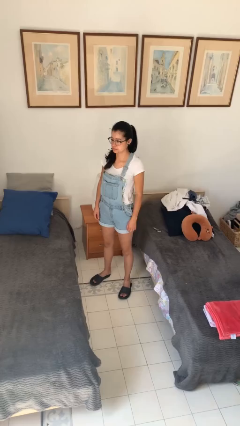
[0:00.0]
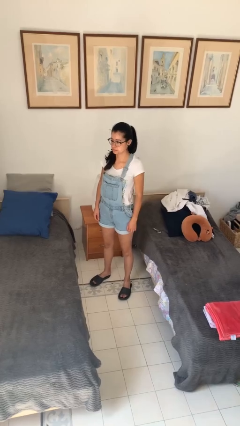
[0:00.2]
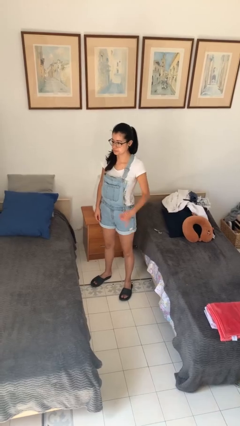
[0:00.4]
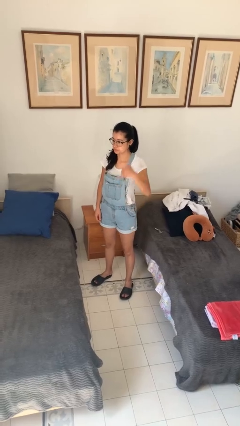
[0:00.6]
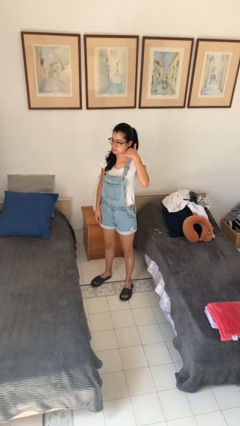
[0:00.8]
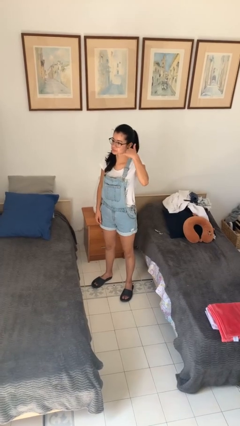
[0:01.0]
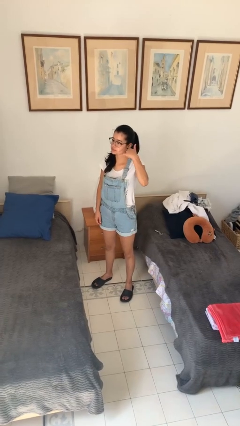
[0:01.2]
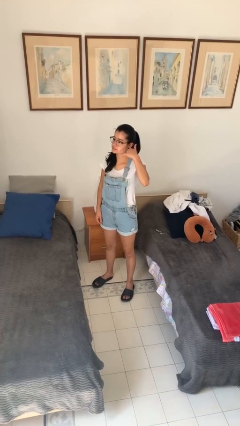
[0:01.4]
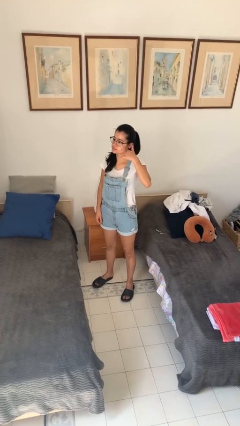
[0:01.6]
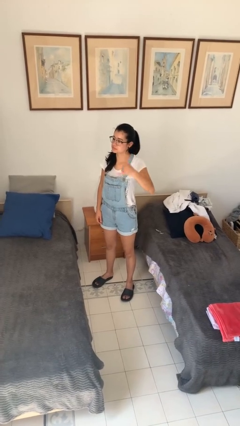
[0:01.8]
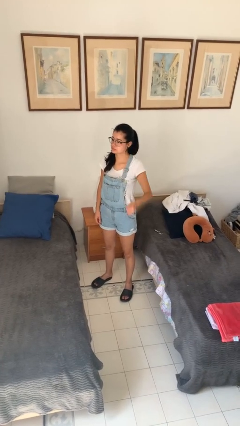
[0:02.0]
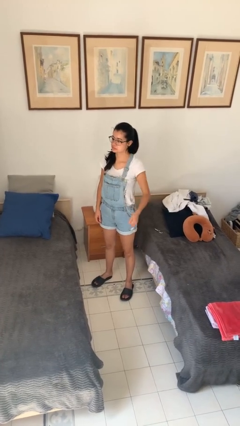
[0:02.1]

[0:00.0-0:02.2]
person gestures call me

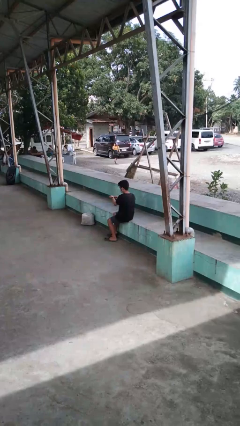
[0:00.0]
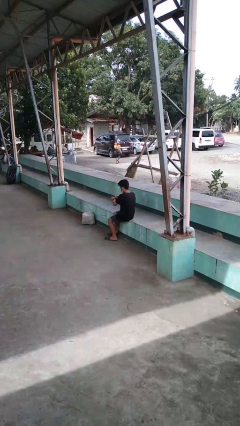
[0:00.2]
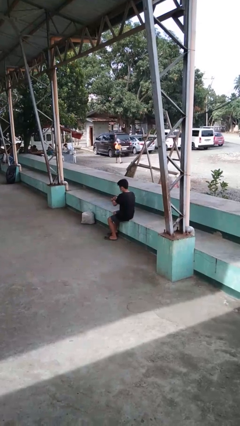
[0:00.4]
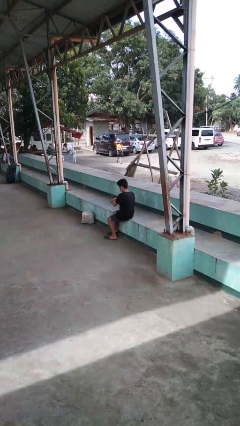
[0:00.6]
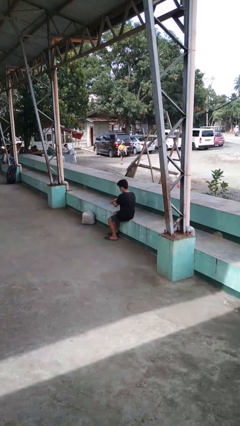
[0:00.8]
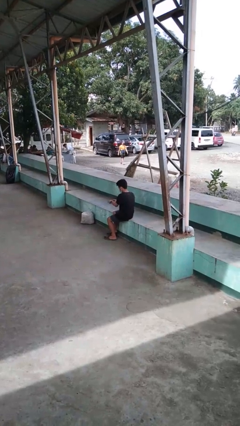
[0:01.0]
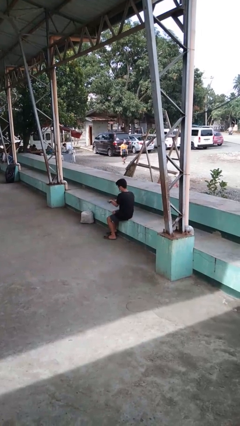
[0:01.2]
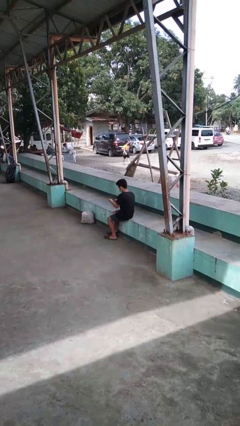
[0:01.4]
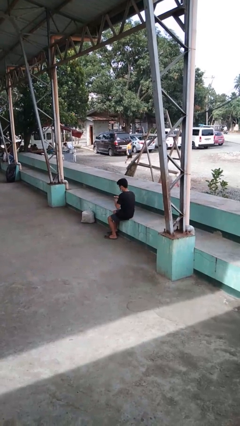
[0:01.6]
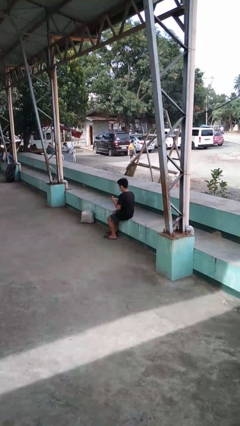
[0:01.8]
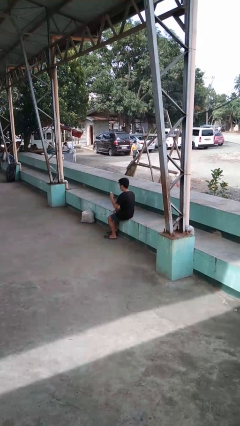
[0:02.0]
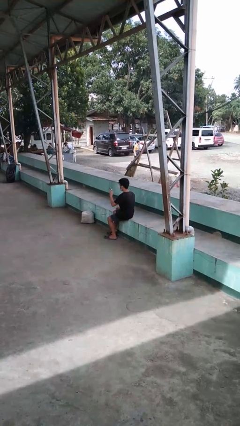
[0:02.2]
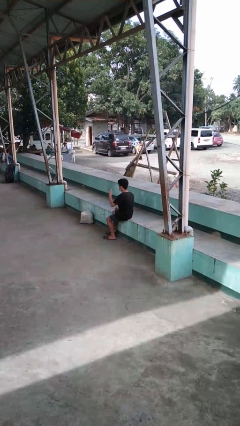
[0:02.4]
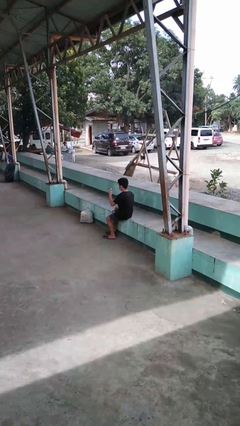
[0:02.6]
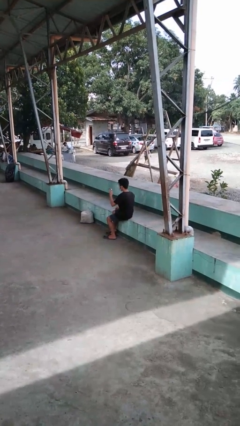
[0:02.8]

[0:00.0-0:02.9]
person takes off wristwatch

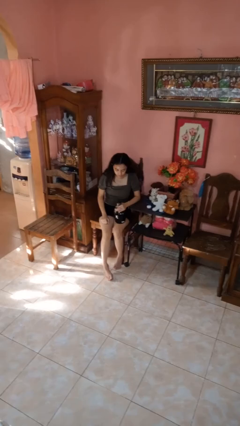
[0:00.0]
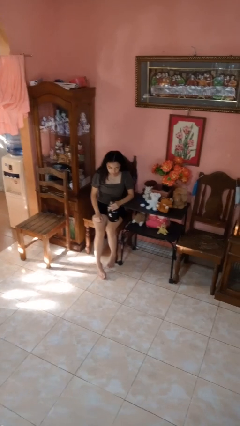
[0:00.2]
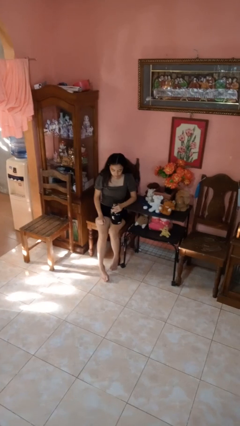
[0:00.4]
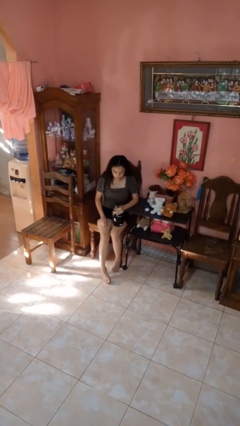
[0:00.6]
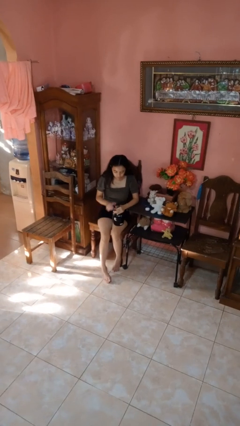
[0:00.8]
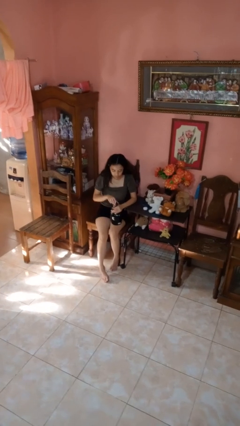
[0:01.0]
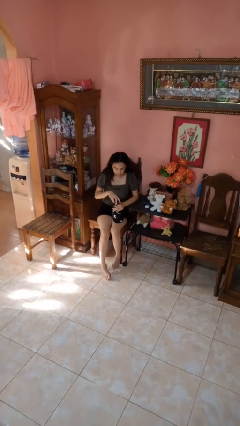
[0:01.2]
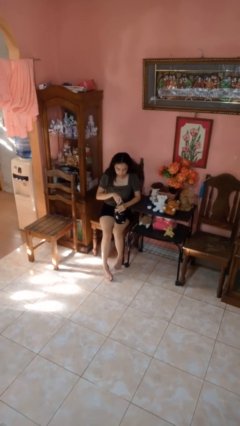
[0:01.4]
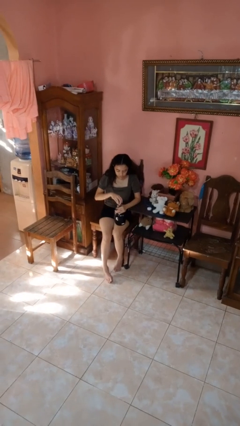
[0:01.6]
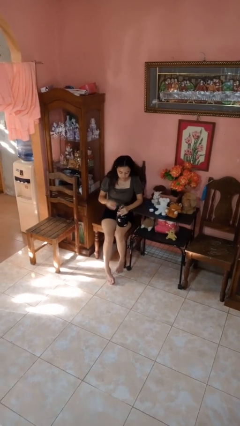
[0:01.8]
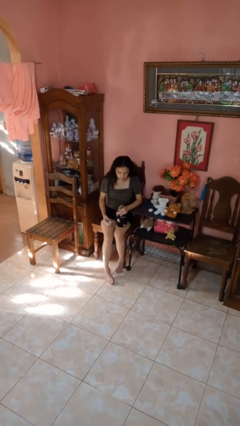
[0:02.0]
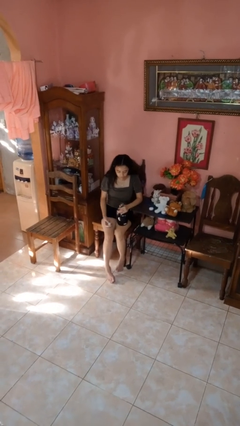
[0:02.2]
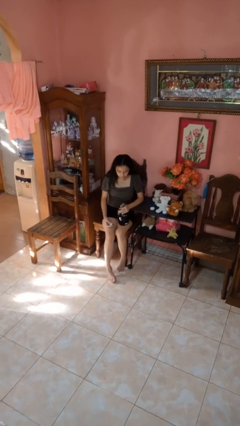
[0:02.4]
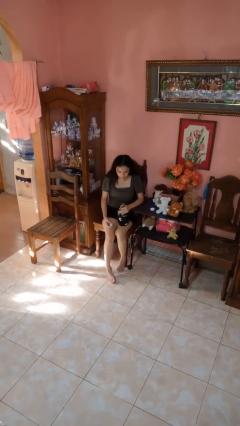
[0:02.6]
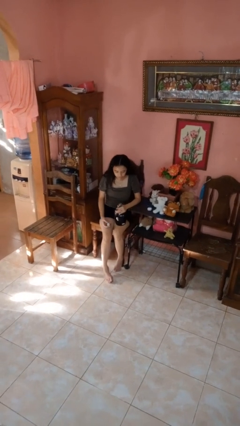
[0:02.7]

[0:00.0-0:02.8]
person unscrews lid from bottle

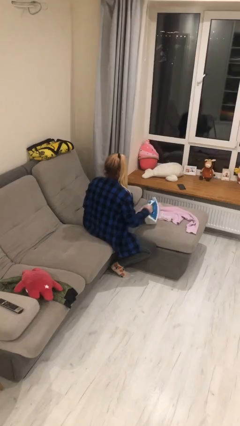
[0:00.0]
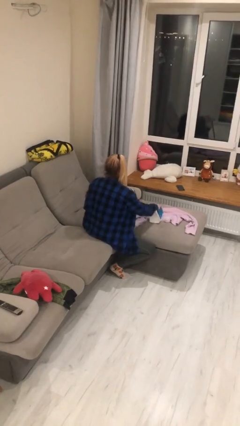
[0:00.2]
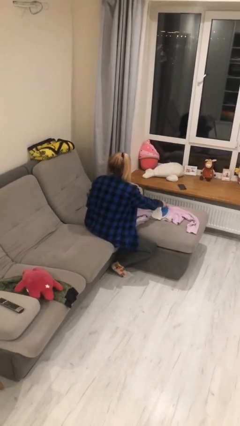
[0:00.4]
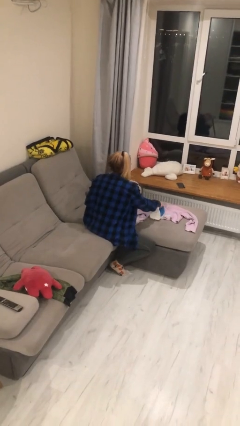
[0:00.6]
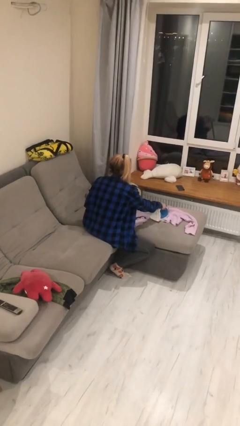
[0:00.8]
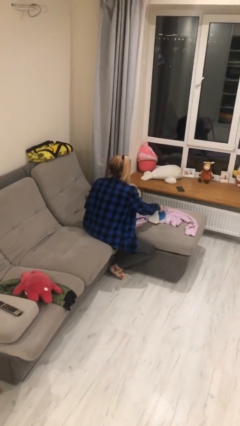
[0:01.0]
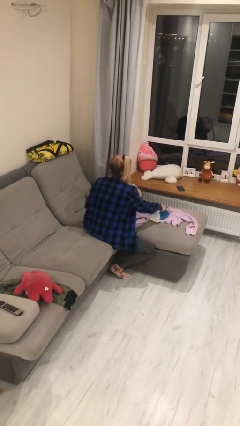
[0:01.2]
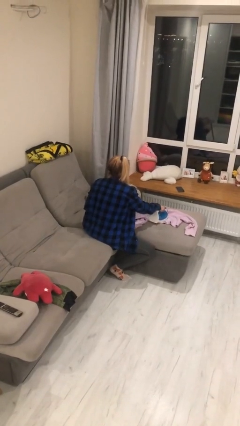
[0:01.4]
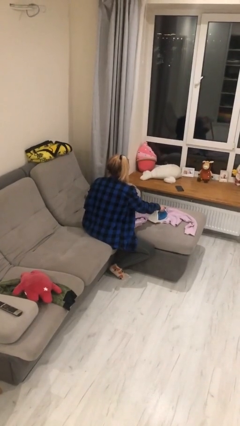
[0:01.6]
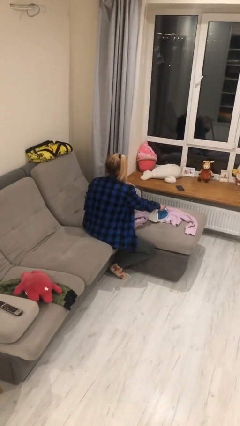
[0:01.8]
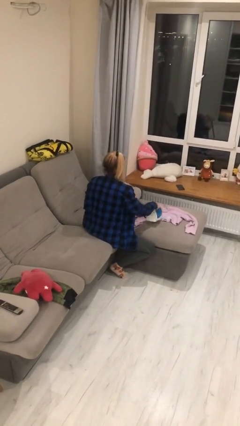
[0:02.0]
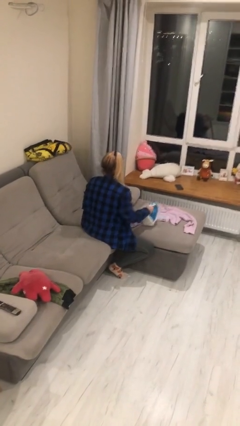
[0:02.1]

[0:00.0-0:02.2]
person irons clothes

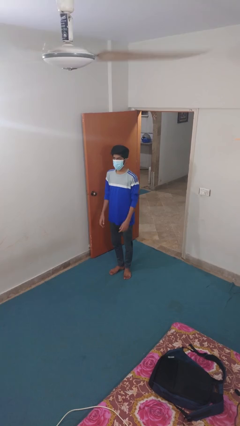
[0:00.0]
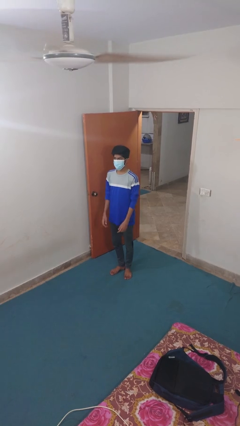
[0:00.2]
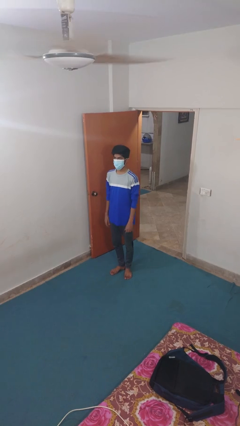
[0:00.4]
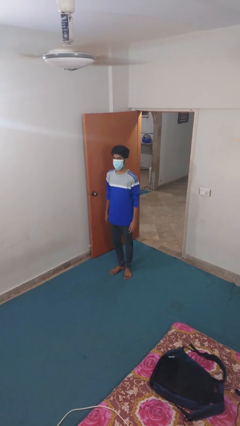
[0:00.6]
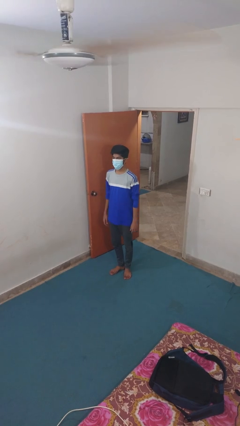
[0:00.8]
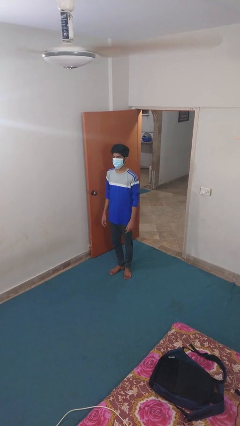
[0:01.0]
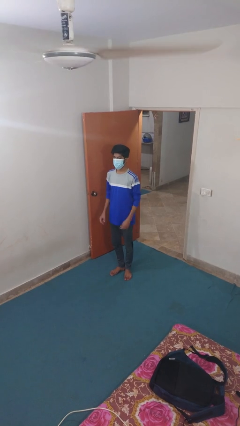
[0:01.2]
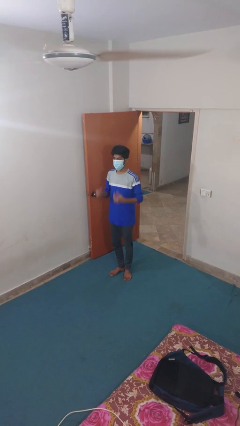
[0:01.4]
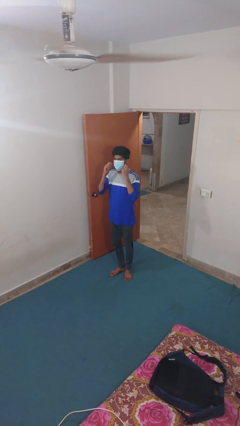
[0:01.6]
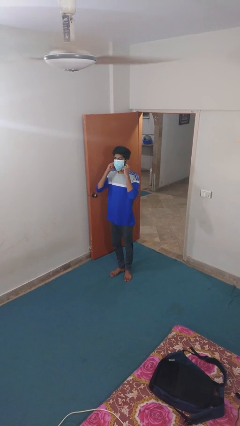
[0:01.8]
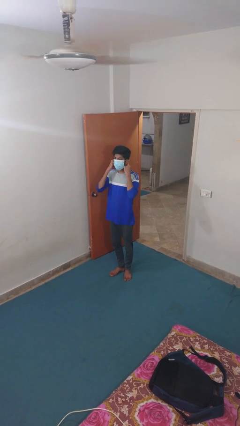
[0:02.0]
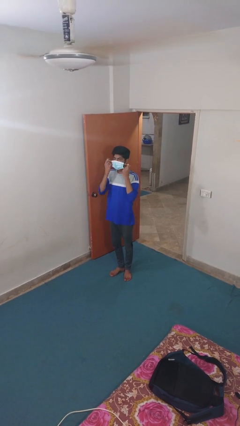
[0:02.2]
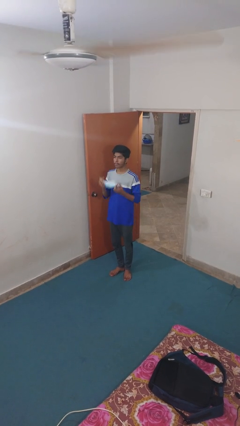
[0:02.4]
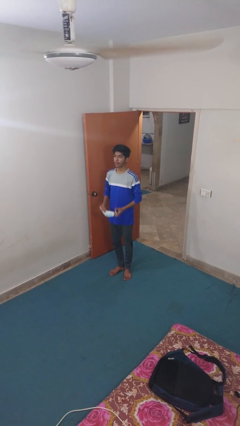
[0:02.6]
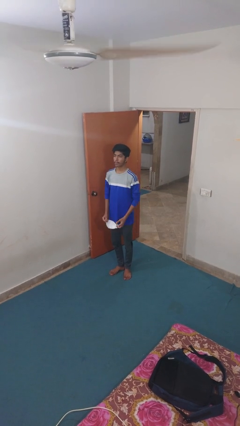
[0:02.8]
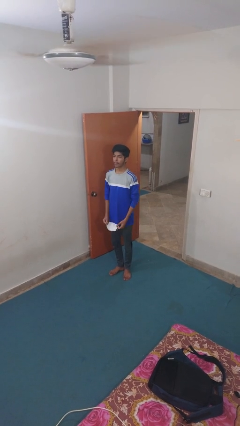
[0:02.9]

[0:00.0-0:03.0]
person takes off facemask

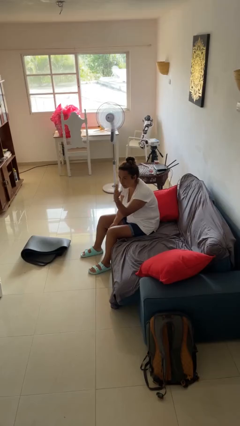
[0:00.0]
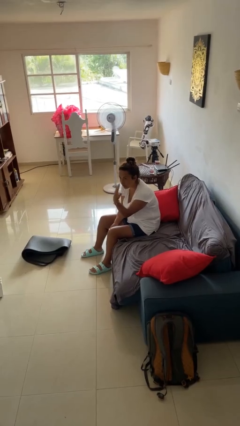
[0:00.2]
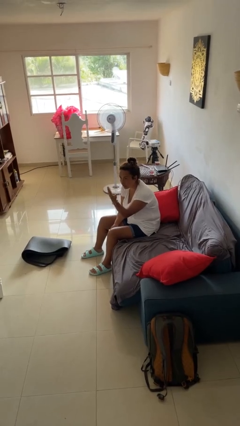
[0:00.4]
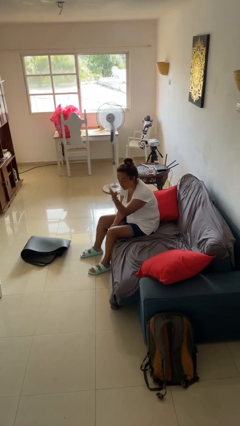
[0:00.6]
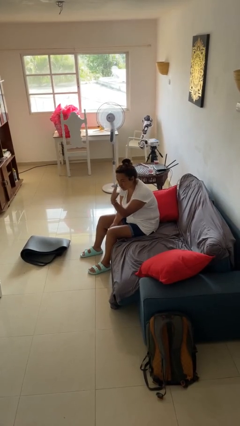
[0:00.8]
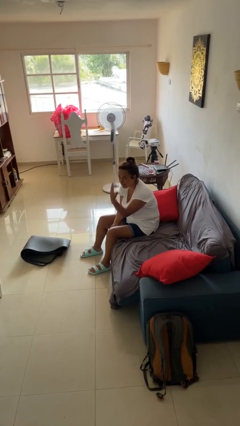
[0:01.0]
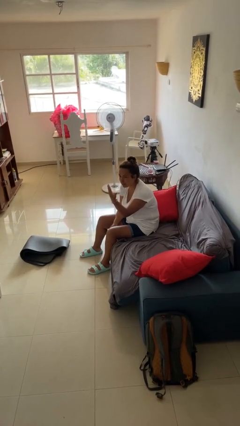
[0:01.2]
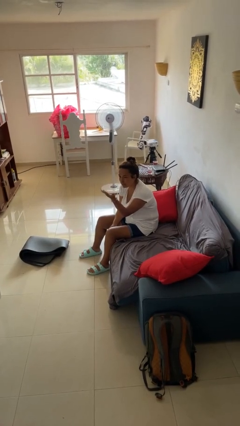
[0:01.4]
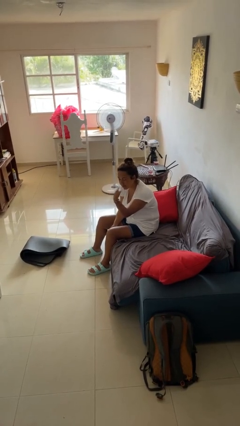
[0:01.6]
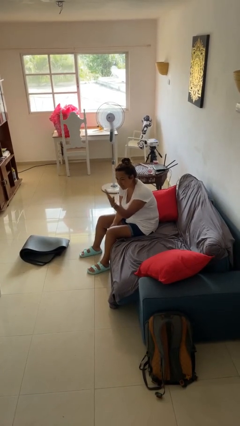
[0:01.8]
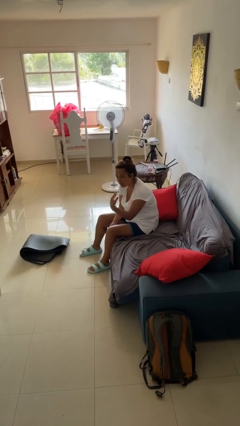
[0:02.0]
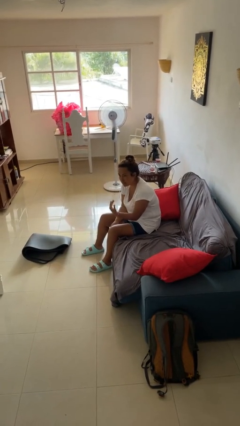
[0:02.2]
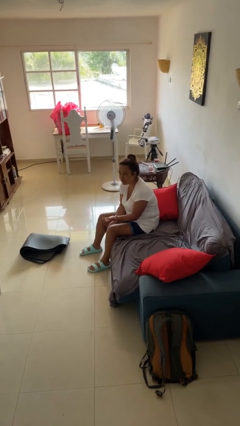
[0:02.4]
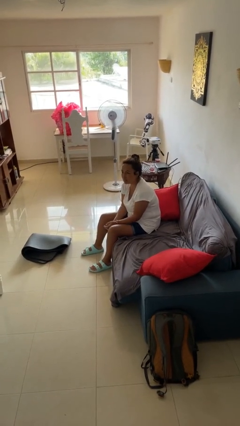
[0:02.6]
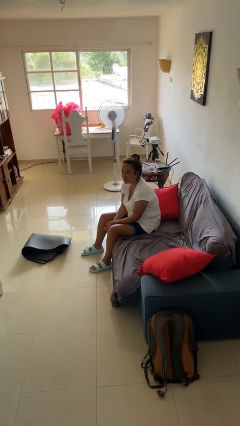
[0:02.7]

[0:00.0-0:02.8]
person gestures come here

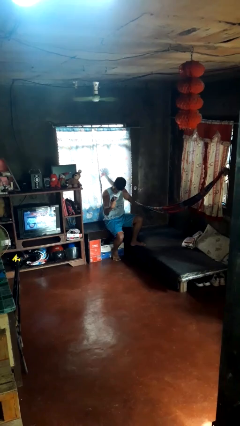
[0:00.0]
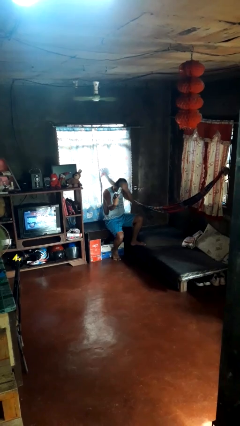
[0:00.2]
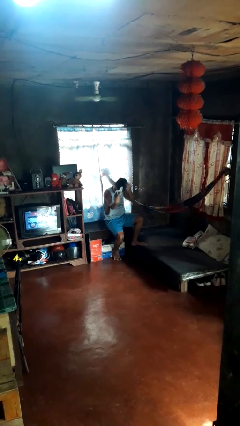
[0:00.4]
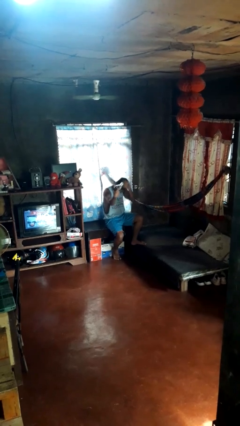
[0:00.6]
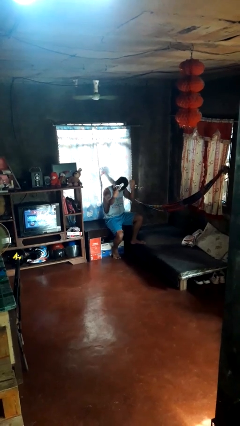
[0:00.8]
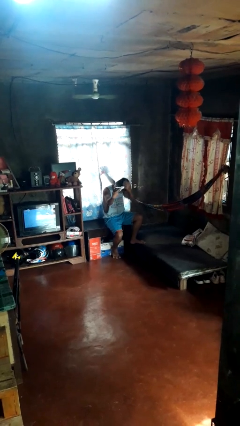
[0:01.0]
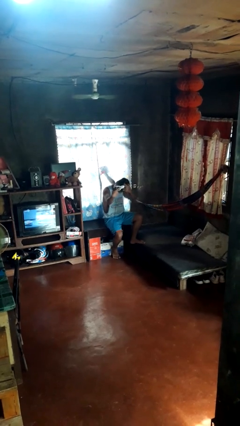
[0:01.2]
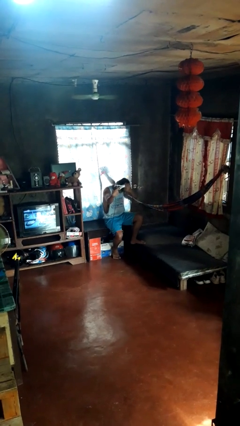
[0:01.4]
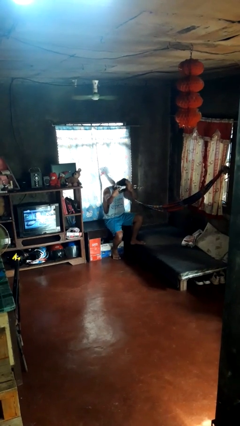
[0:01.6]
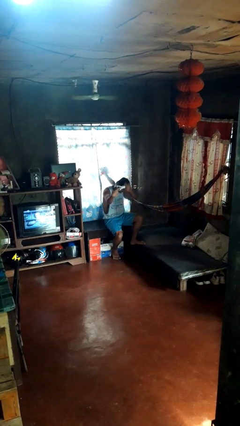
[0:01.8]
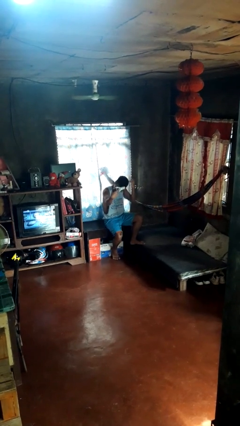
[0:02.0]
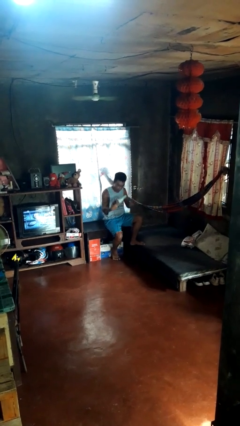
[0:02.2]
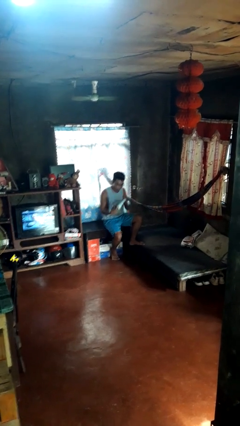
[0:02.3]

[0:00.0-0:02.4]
person dries hair with hairdryer
